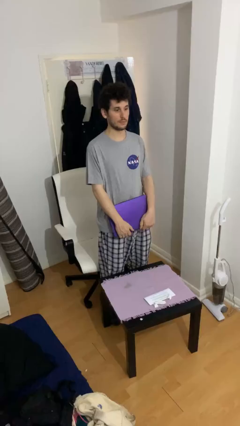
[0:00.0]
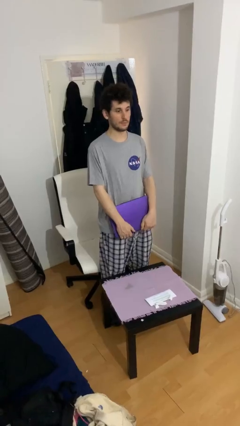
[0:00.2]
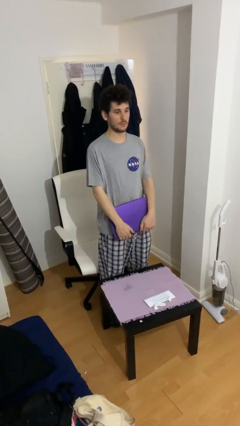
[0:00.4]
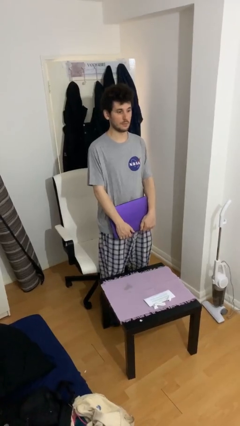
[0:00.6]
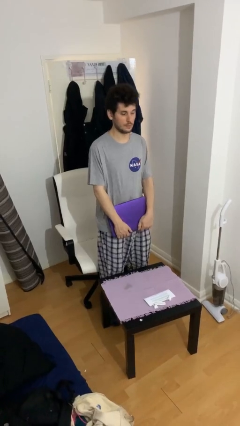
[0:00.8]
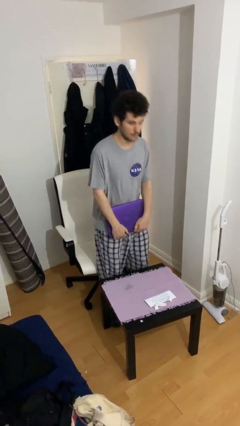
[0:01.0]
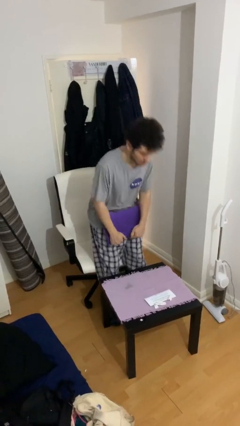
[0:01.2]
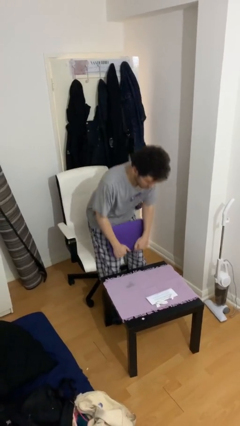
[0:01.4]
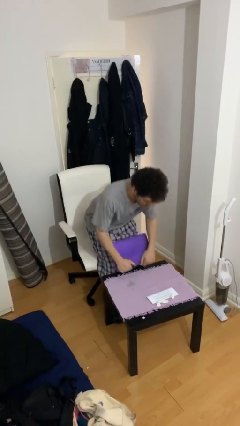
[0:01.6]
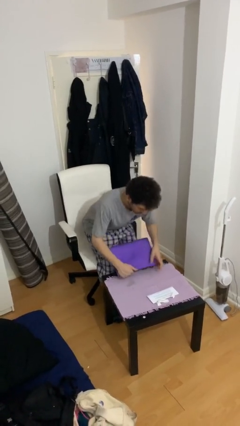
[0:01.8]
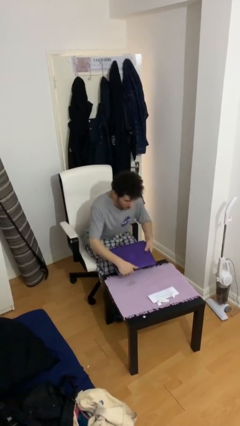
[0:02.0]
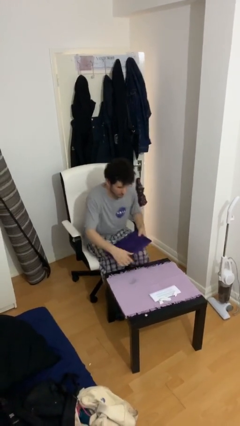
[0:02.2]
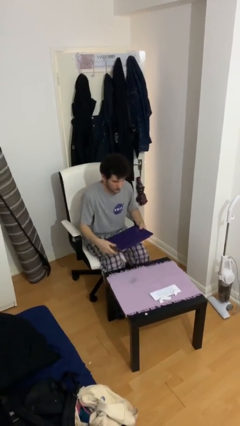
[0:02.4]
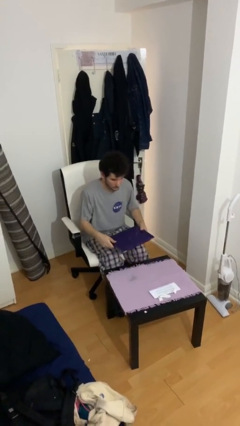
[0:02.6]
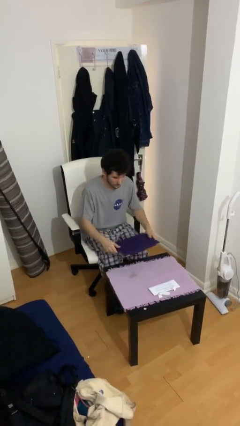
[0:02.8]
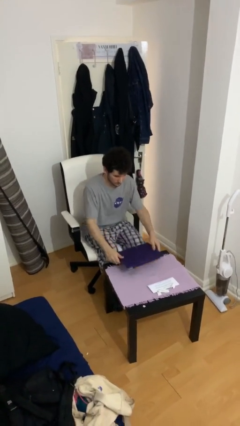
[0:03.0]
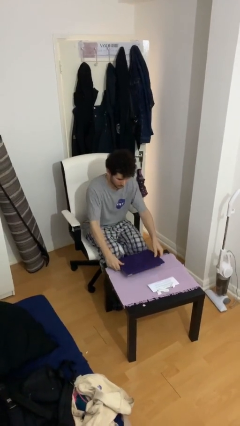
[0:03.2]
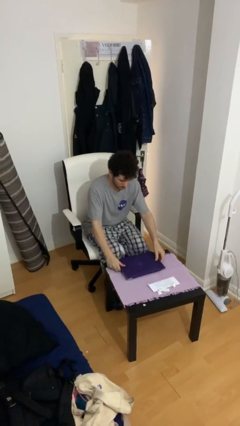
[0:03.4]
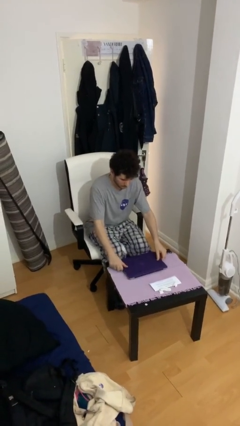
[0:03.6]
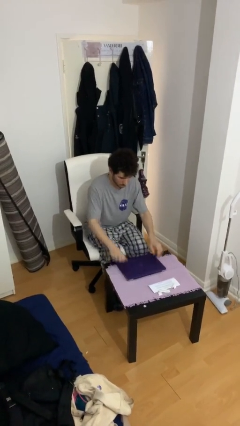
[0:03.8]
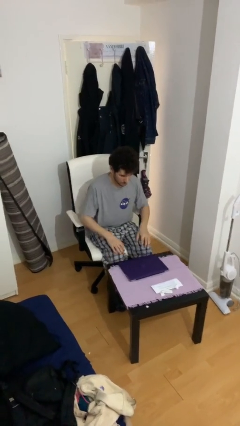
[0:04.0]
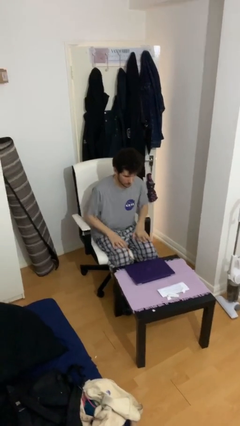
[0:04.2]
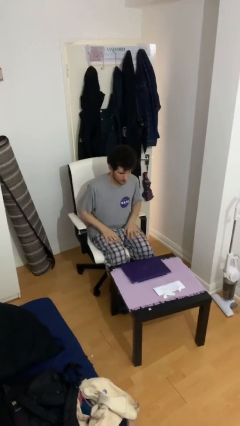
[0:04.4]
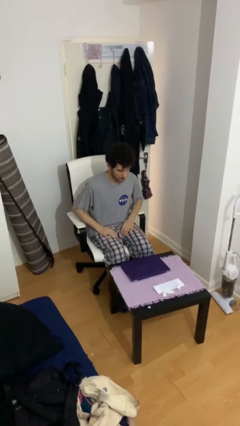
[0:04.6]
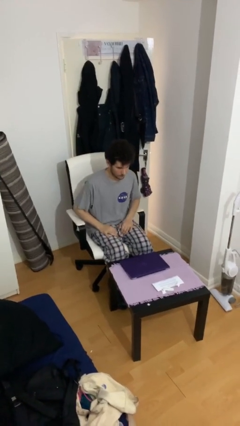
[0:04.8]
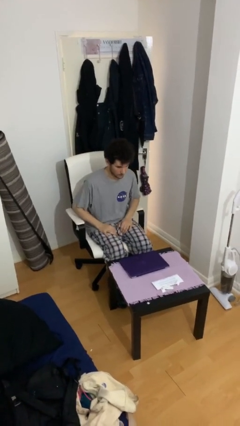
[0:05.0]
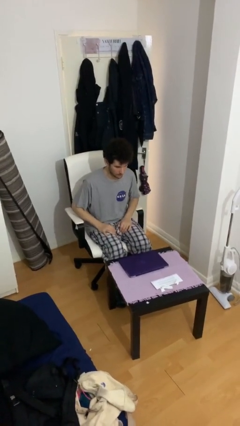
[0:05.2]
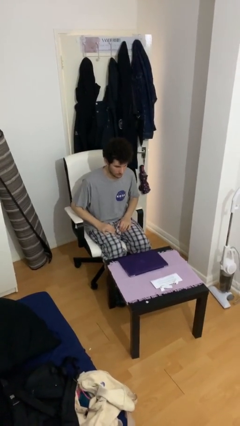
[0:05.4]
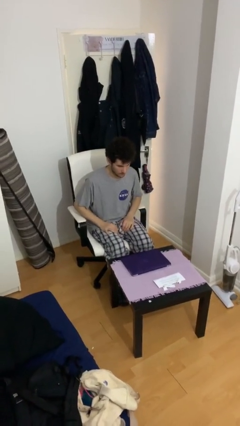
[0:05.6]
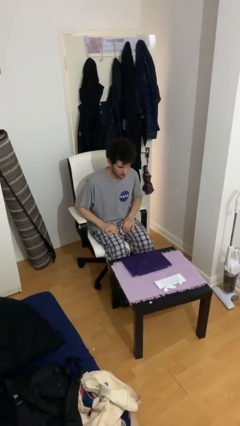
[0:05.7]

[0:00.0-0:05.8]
person sits down

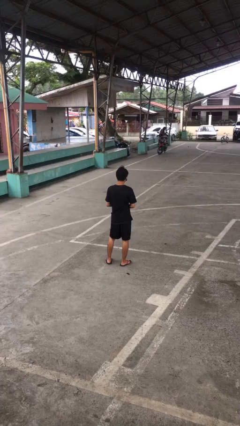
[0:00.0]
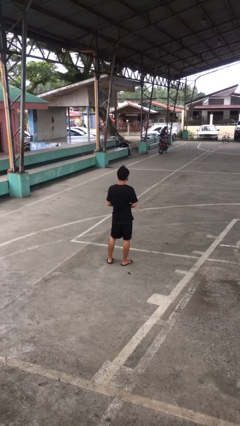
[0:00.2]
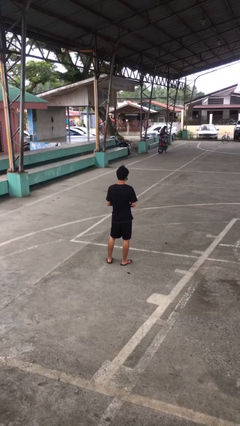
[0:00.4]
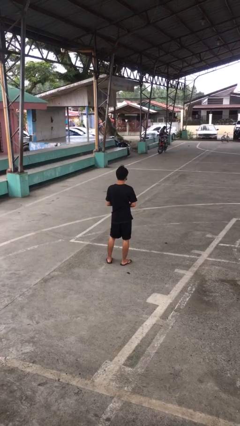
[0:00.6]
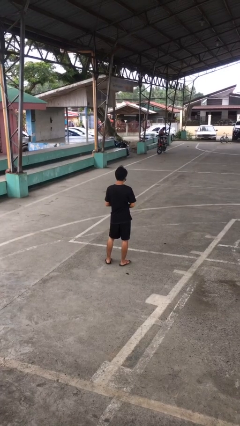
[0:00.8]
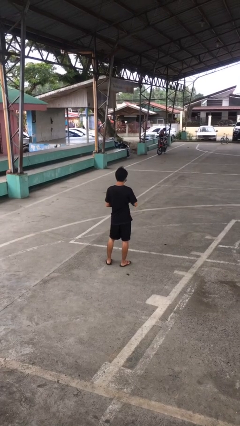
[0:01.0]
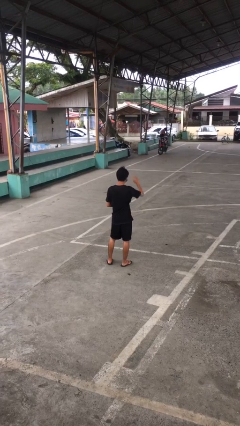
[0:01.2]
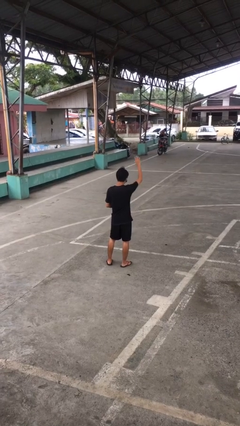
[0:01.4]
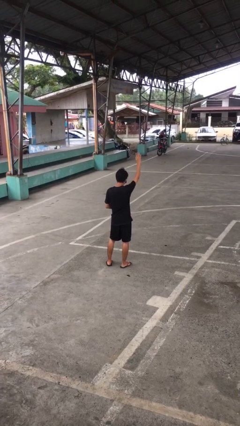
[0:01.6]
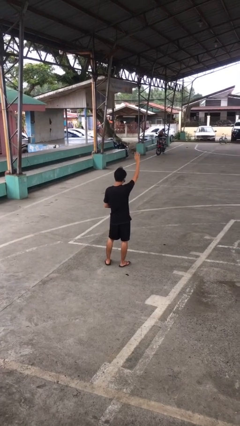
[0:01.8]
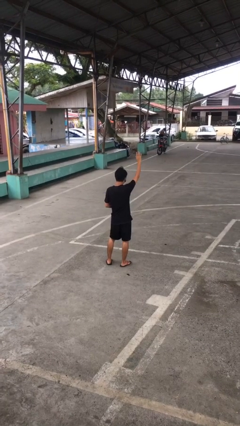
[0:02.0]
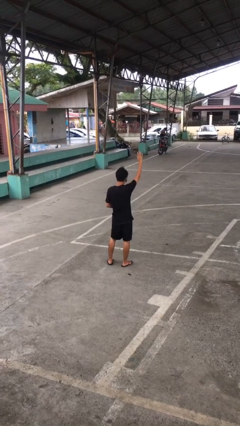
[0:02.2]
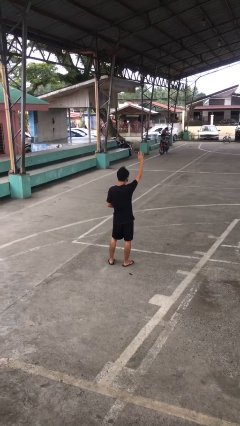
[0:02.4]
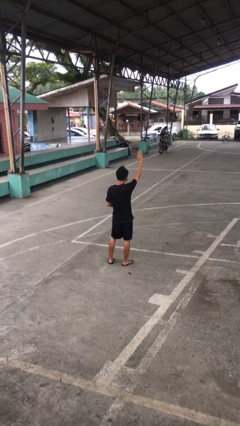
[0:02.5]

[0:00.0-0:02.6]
person gestures raise hand

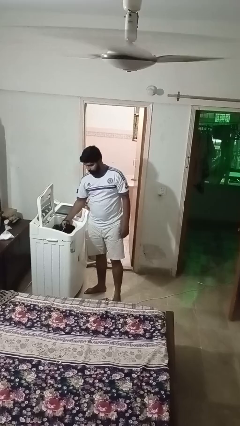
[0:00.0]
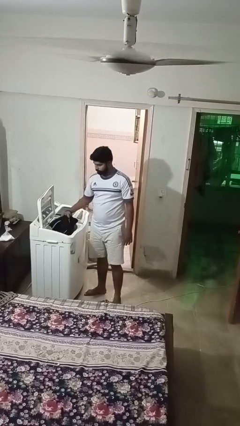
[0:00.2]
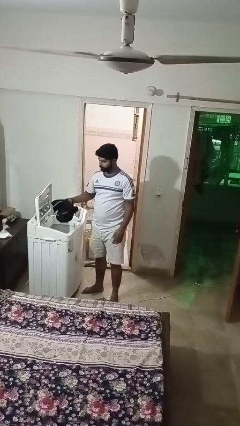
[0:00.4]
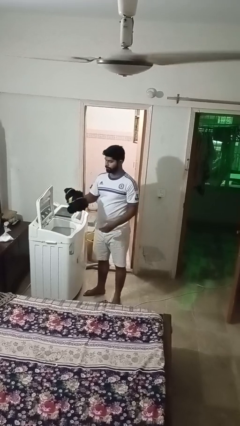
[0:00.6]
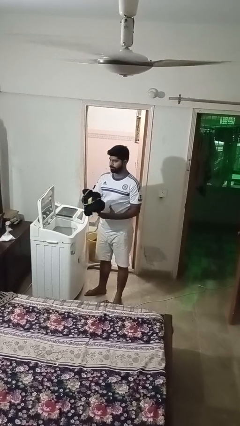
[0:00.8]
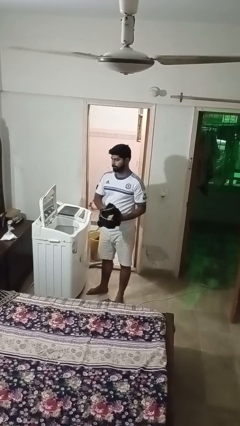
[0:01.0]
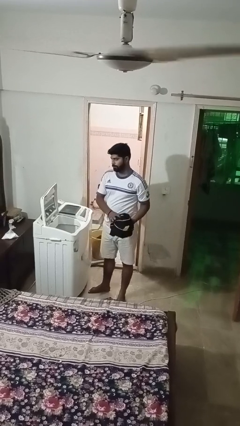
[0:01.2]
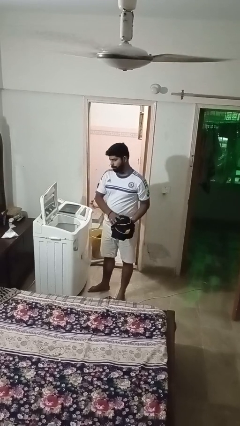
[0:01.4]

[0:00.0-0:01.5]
person unloads clotheswasher

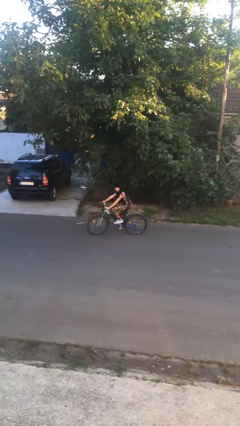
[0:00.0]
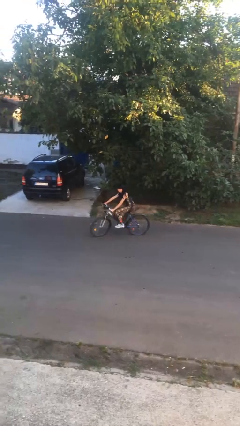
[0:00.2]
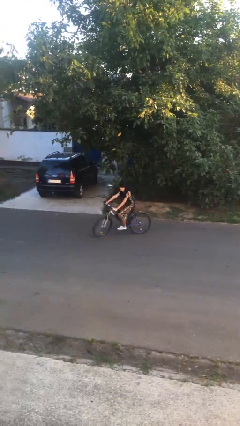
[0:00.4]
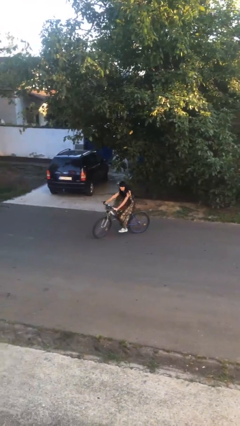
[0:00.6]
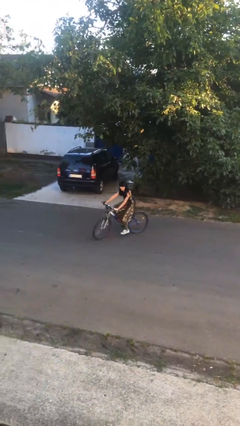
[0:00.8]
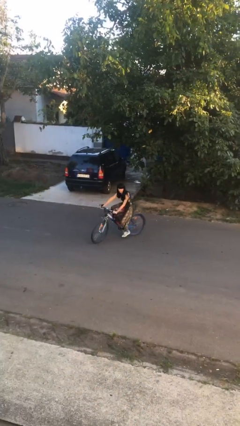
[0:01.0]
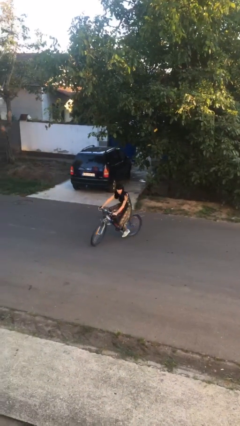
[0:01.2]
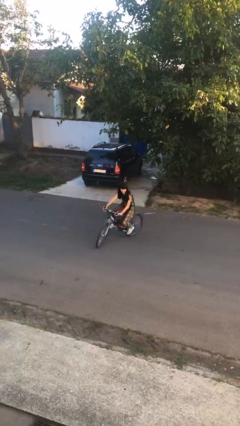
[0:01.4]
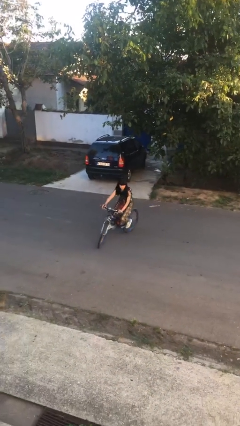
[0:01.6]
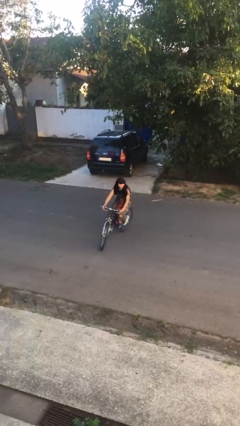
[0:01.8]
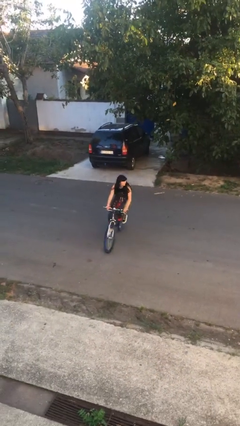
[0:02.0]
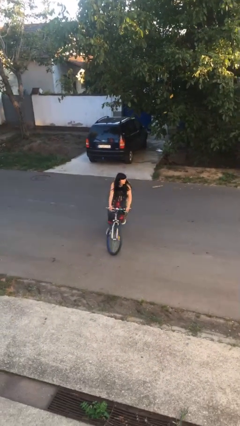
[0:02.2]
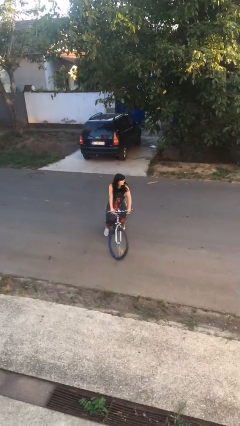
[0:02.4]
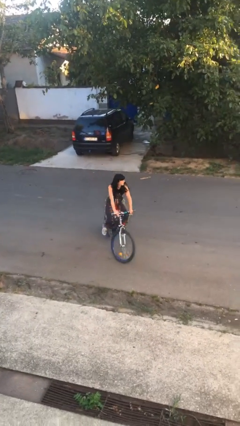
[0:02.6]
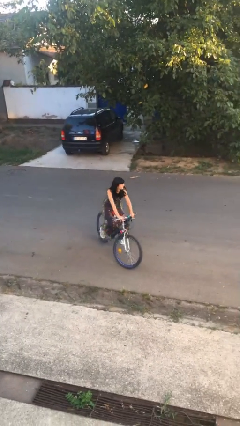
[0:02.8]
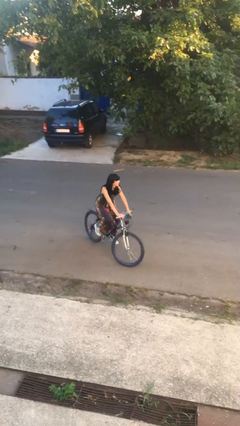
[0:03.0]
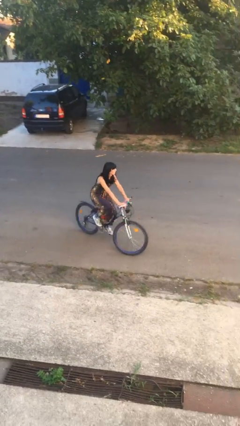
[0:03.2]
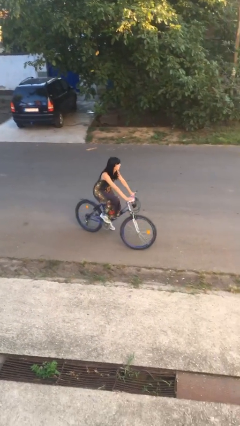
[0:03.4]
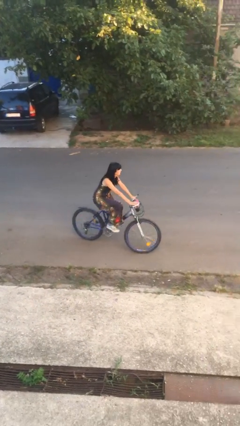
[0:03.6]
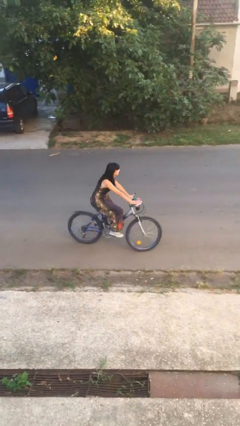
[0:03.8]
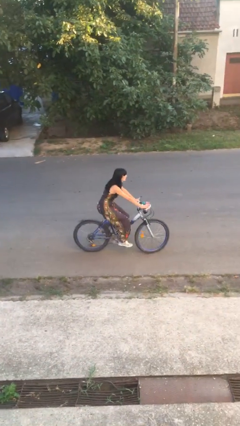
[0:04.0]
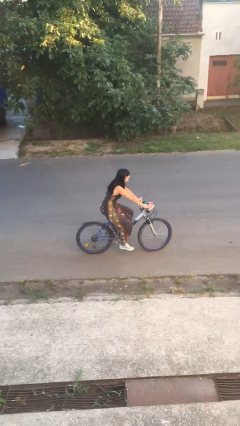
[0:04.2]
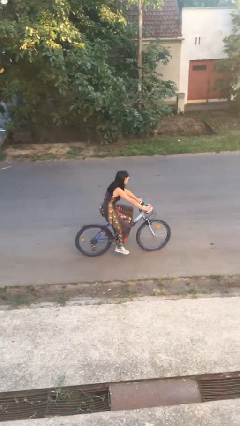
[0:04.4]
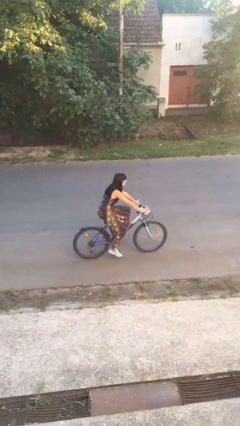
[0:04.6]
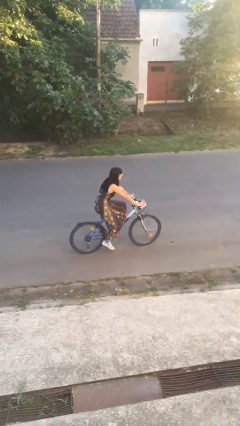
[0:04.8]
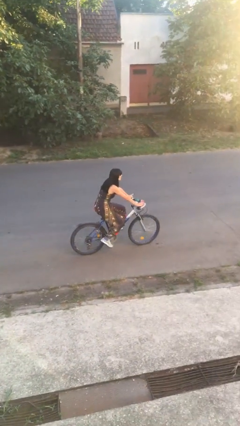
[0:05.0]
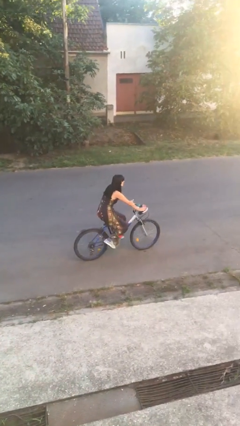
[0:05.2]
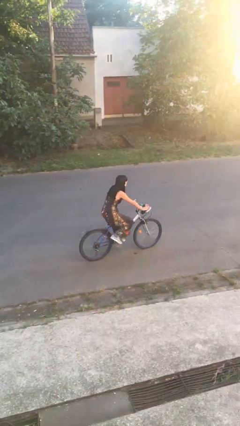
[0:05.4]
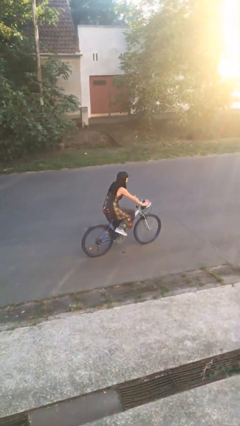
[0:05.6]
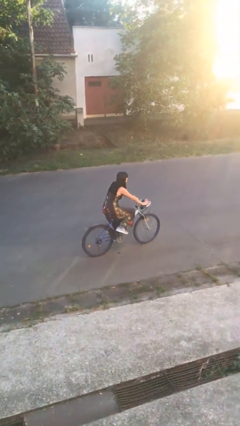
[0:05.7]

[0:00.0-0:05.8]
person rides bicycle

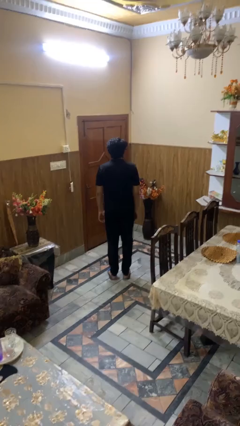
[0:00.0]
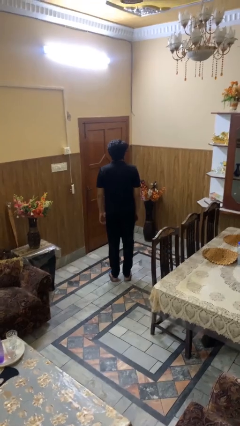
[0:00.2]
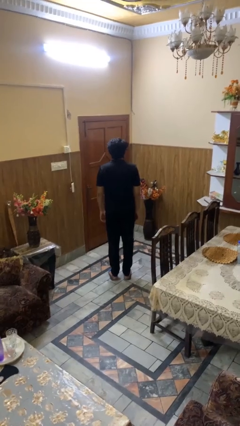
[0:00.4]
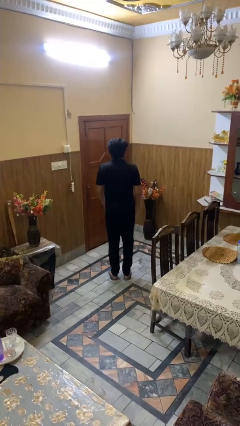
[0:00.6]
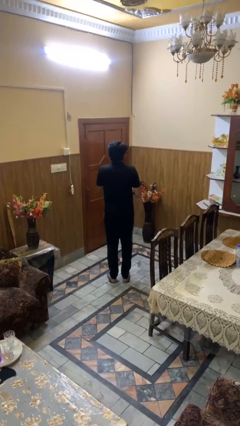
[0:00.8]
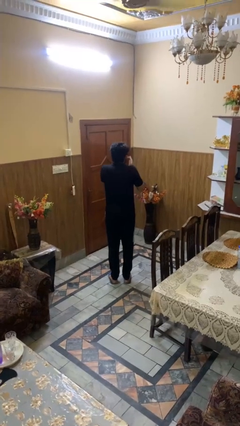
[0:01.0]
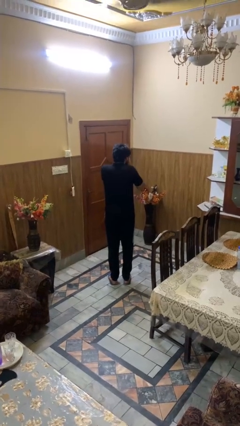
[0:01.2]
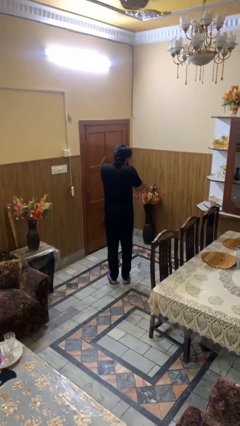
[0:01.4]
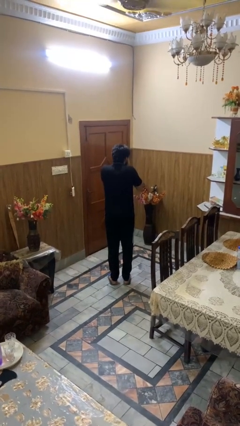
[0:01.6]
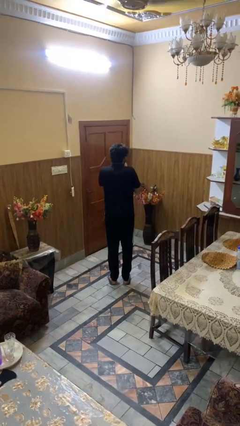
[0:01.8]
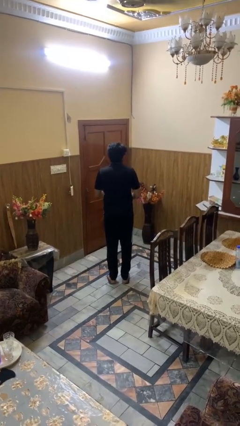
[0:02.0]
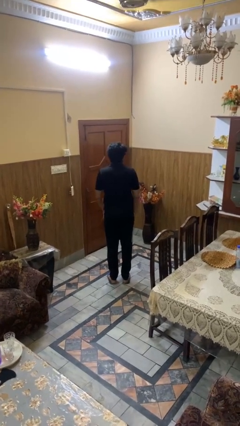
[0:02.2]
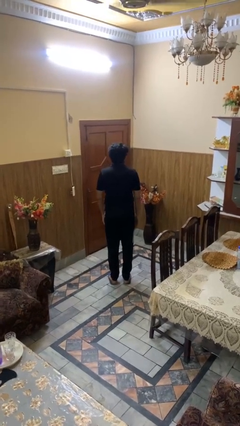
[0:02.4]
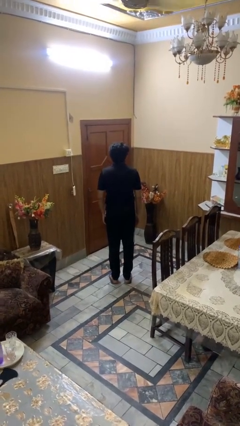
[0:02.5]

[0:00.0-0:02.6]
person sneezes into hand
